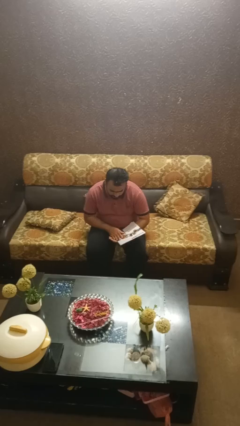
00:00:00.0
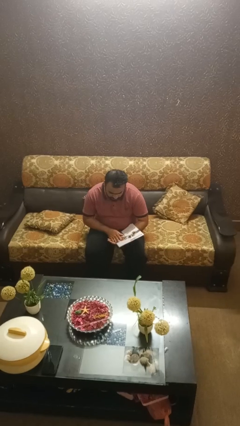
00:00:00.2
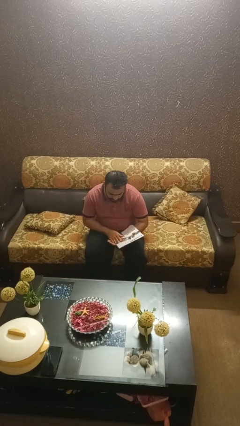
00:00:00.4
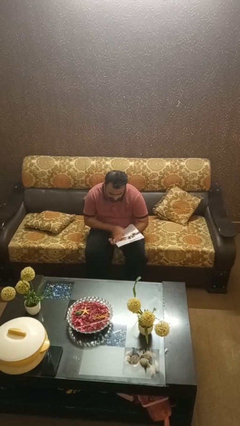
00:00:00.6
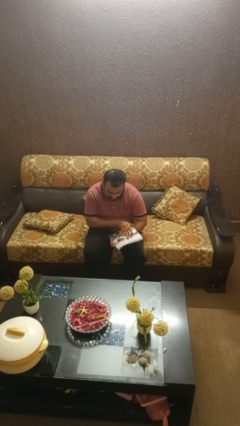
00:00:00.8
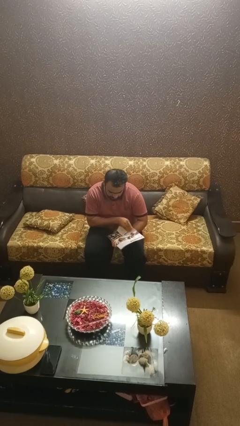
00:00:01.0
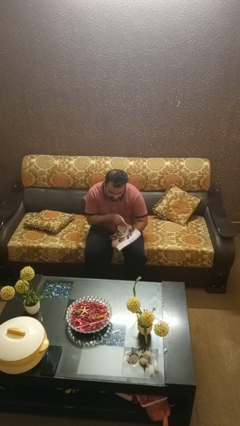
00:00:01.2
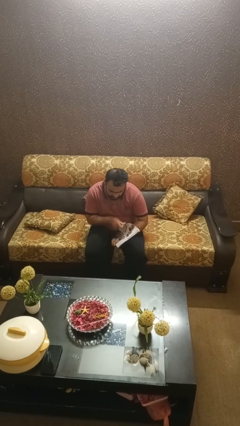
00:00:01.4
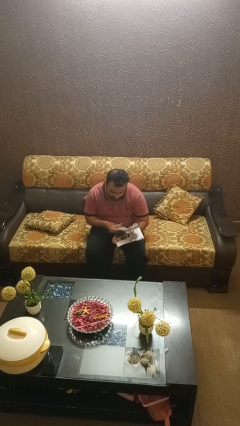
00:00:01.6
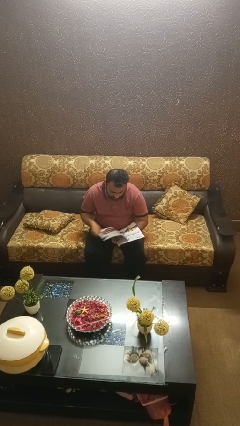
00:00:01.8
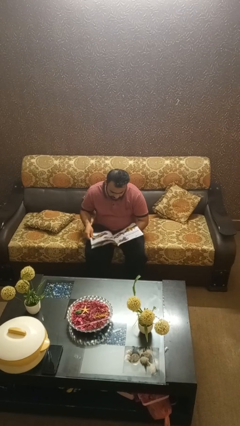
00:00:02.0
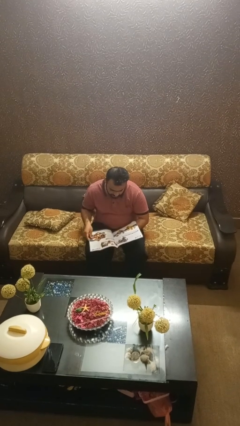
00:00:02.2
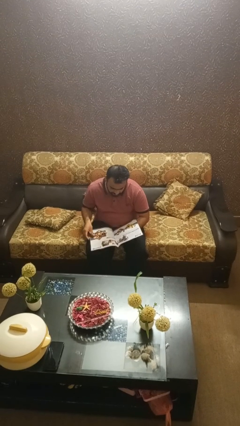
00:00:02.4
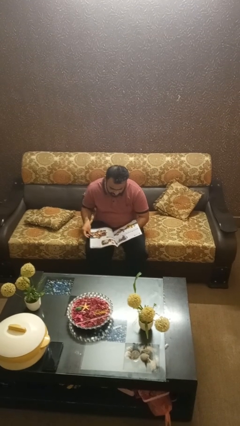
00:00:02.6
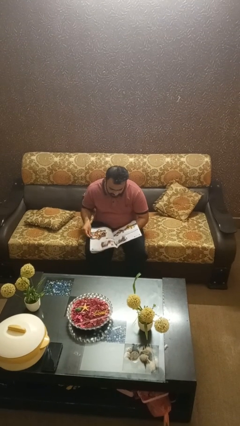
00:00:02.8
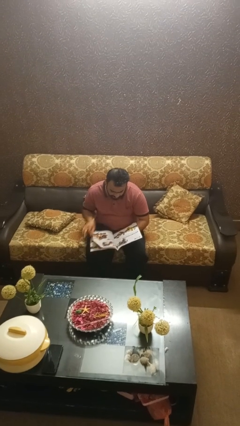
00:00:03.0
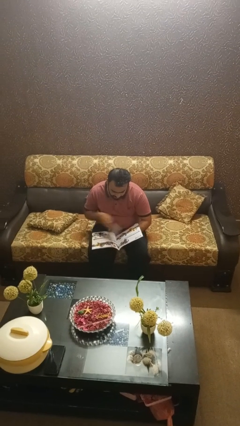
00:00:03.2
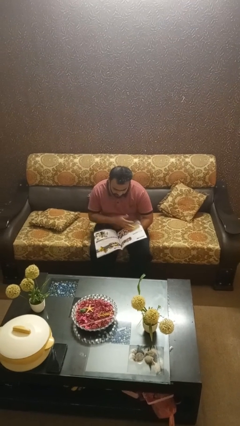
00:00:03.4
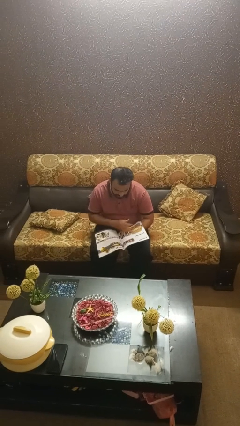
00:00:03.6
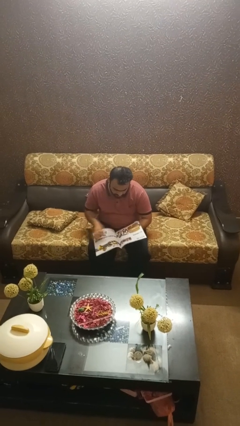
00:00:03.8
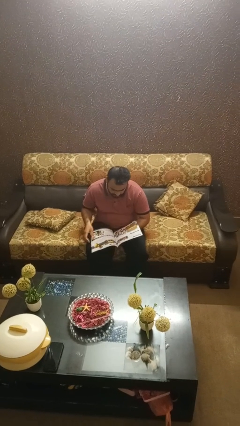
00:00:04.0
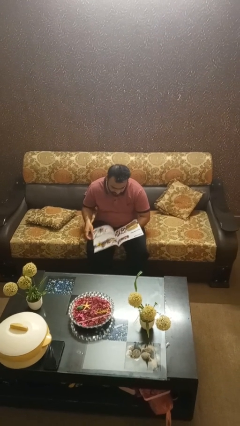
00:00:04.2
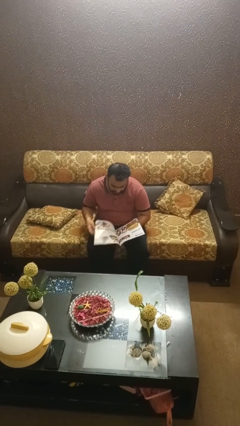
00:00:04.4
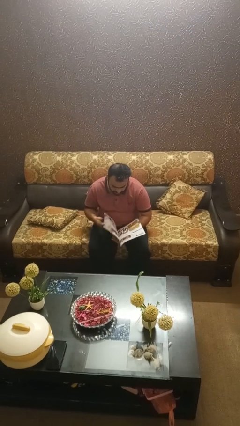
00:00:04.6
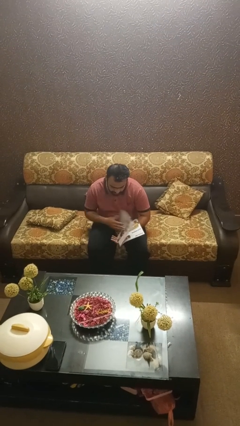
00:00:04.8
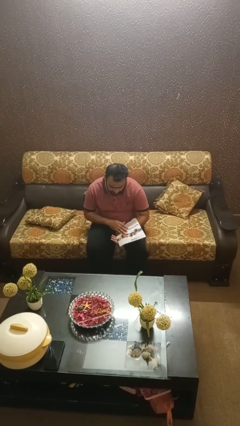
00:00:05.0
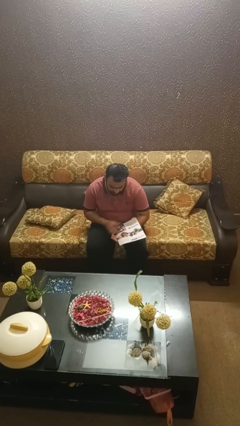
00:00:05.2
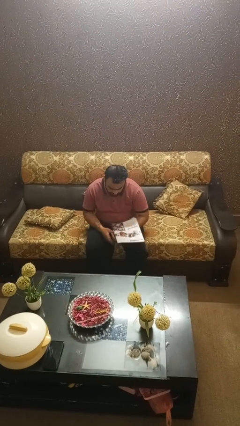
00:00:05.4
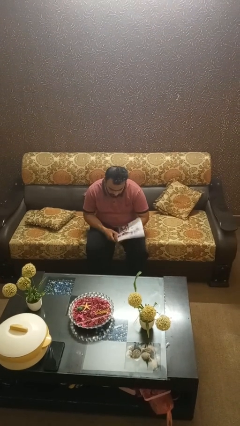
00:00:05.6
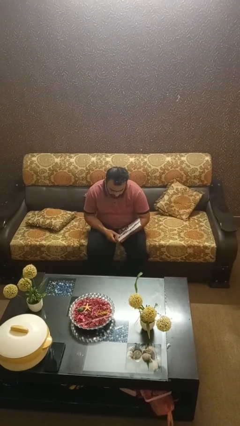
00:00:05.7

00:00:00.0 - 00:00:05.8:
person reads magazine

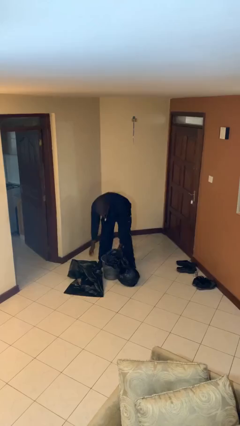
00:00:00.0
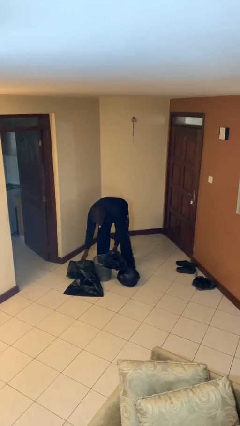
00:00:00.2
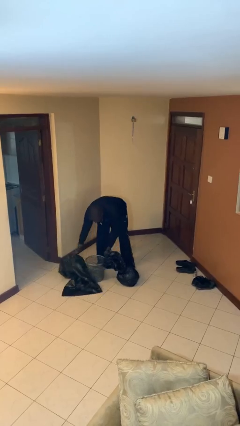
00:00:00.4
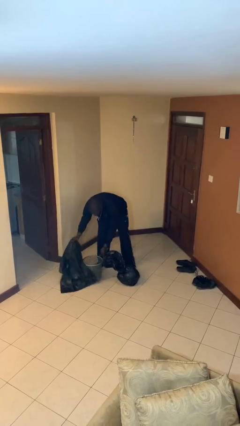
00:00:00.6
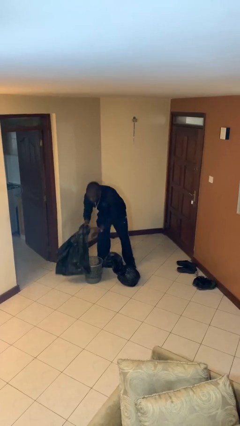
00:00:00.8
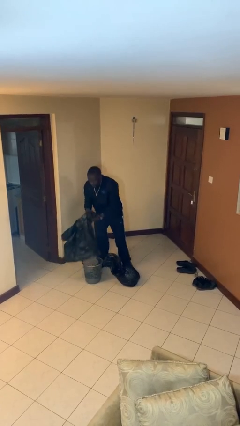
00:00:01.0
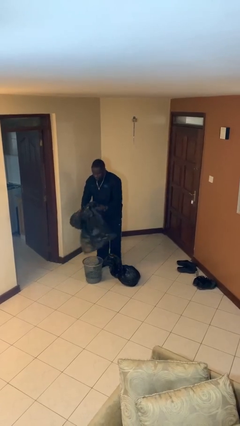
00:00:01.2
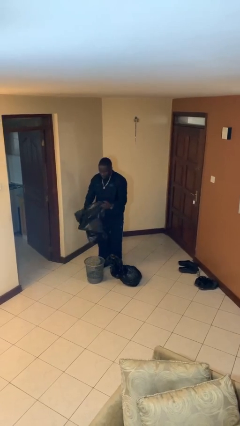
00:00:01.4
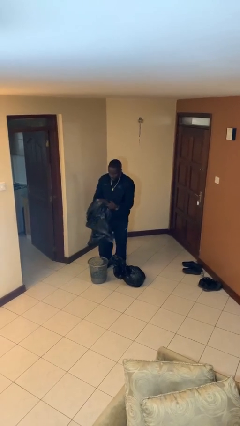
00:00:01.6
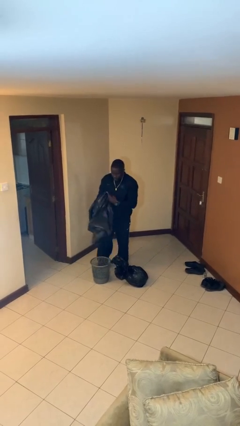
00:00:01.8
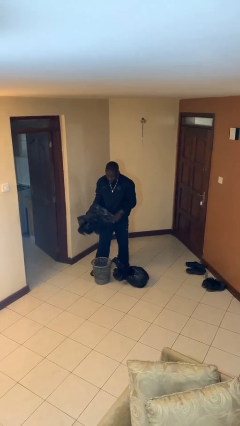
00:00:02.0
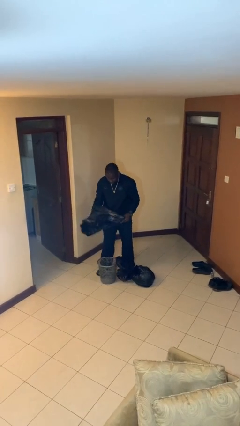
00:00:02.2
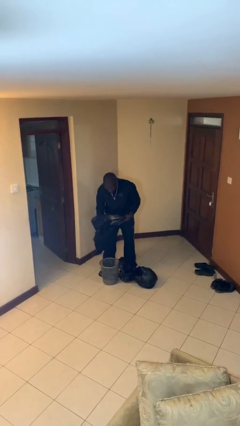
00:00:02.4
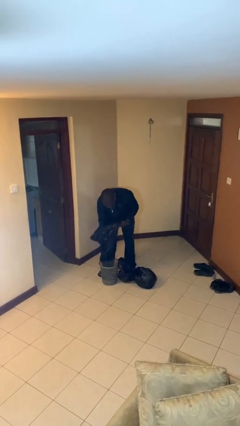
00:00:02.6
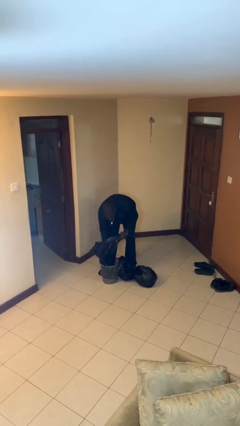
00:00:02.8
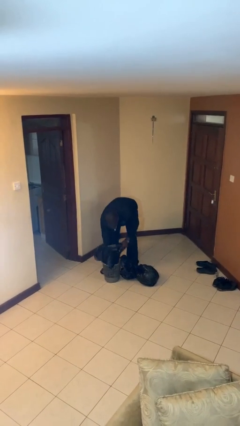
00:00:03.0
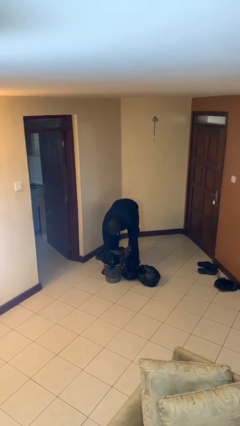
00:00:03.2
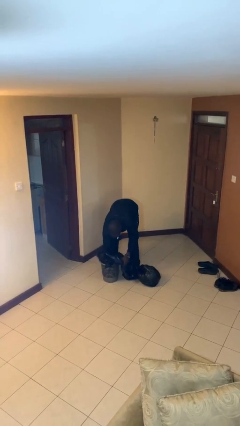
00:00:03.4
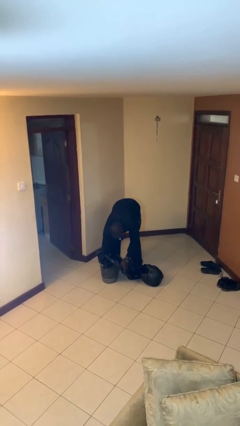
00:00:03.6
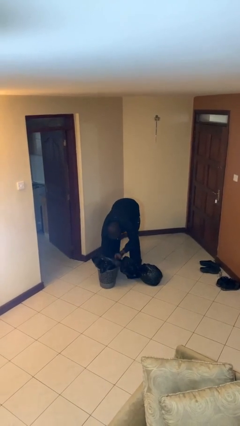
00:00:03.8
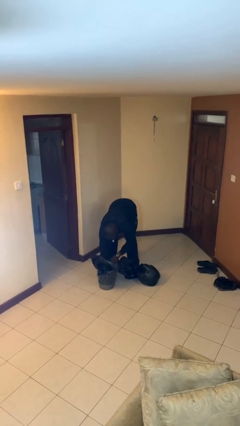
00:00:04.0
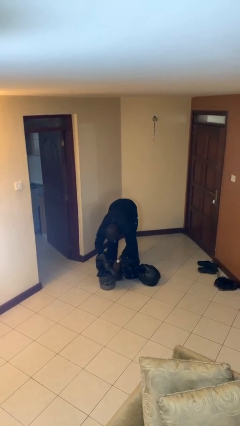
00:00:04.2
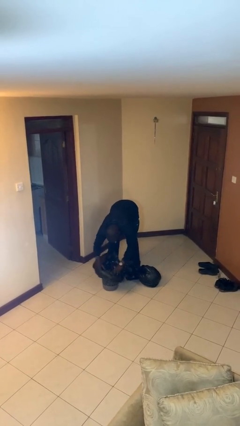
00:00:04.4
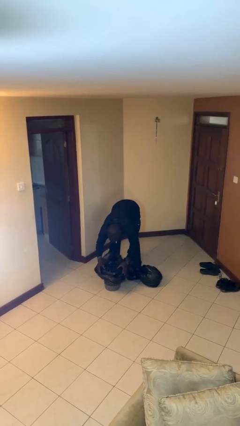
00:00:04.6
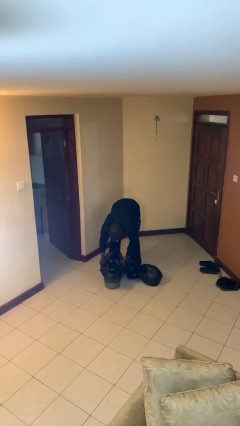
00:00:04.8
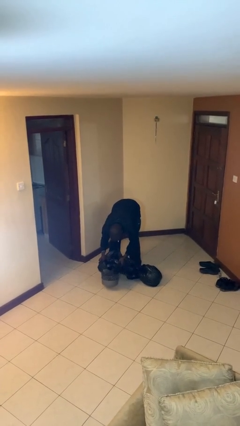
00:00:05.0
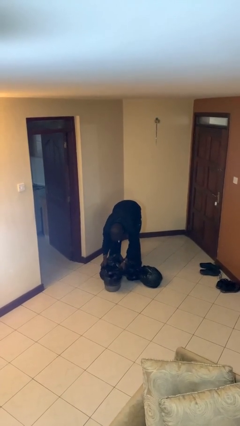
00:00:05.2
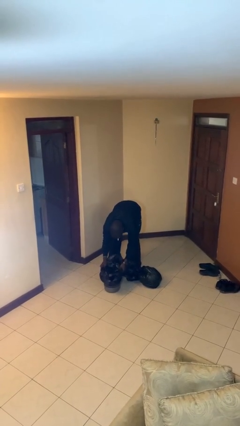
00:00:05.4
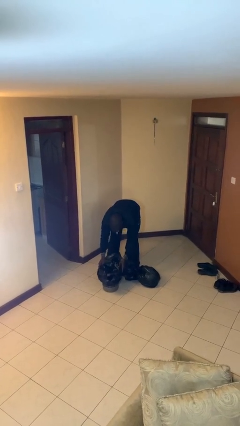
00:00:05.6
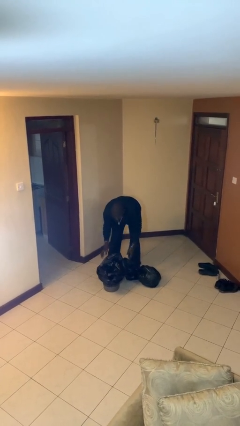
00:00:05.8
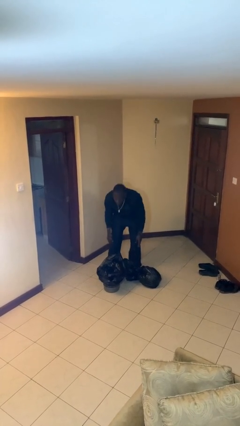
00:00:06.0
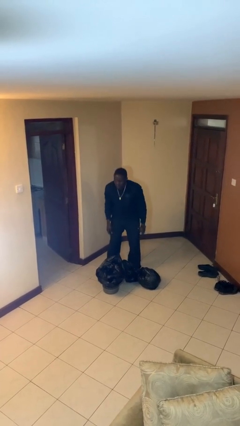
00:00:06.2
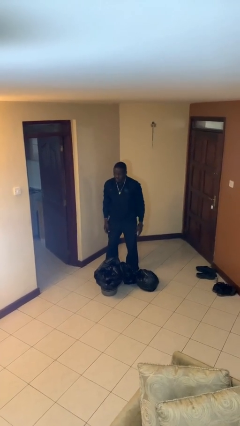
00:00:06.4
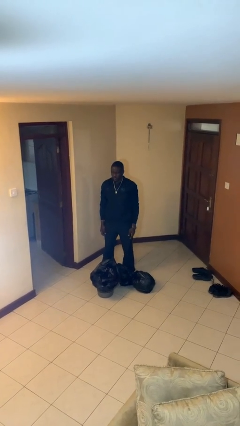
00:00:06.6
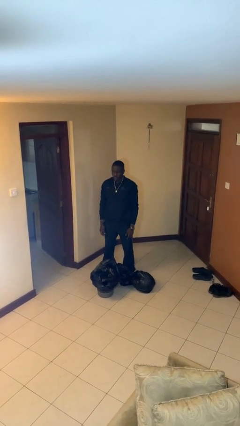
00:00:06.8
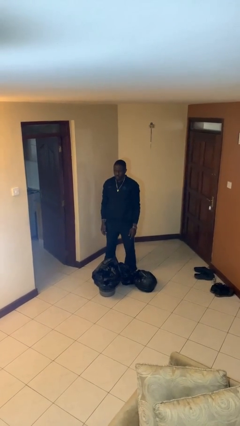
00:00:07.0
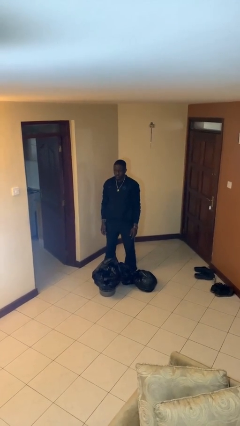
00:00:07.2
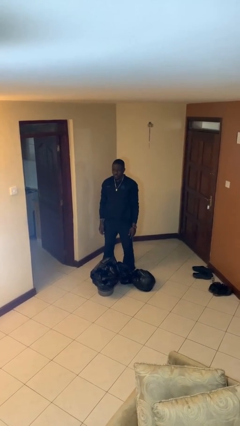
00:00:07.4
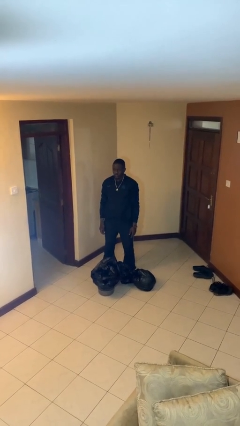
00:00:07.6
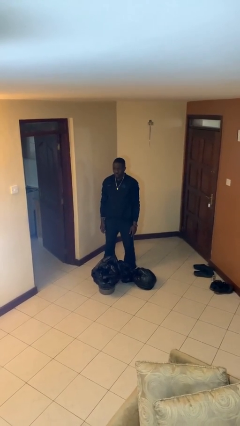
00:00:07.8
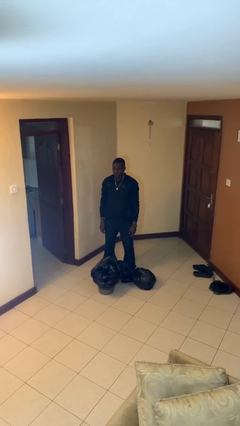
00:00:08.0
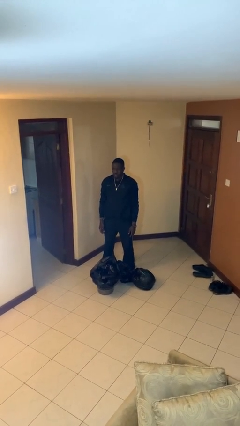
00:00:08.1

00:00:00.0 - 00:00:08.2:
person inserts trashbag into trashcan

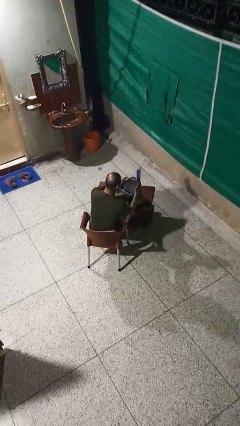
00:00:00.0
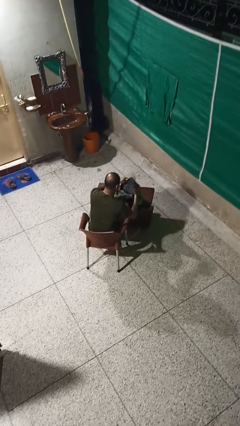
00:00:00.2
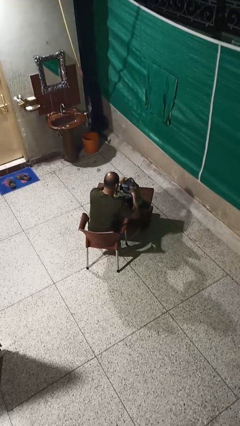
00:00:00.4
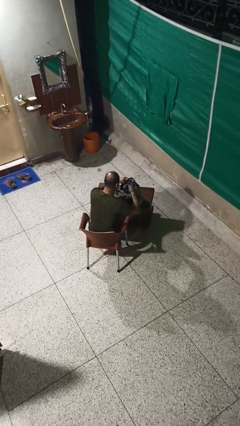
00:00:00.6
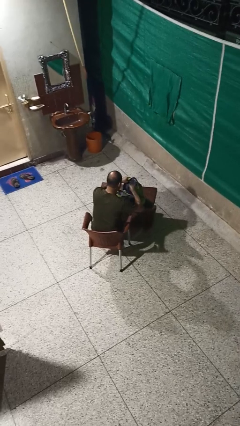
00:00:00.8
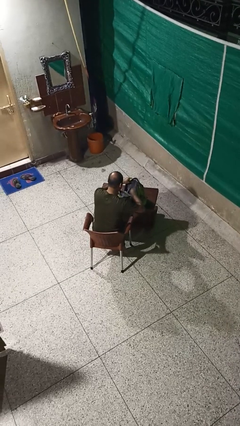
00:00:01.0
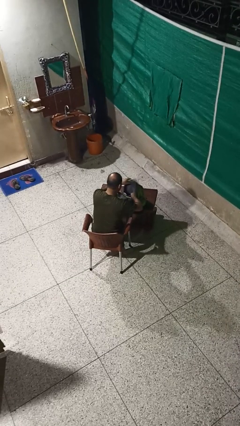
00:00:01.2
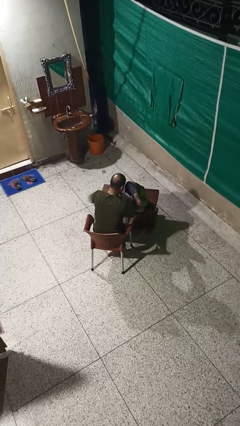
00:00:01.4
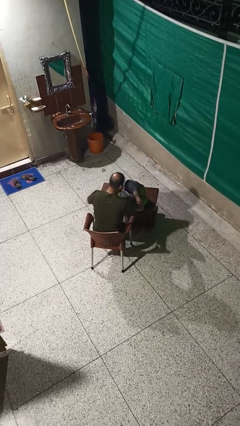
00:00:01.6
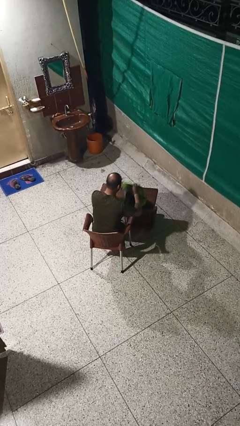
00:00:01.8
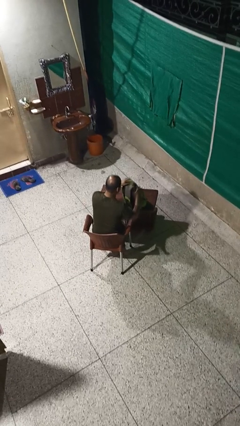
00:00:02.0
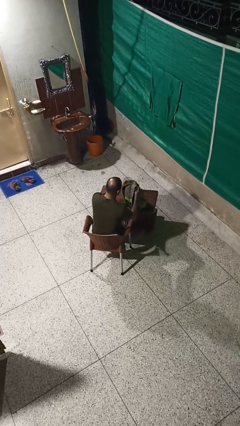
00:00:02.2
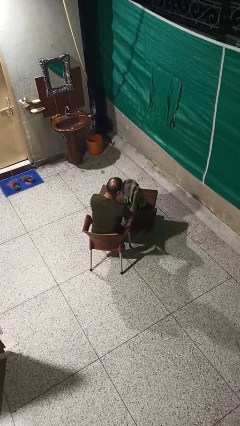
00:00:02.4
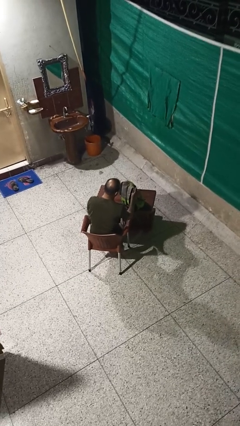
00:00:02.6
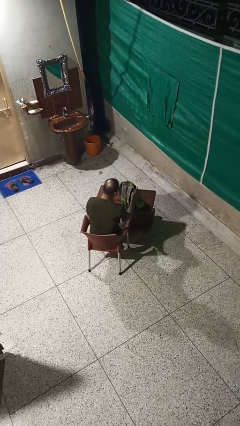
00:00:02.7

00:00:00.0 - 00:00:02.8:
person puts object into backpack

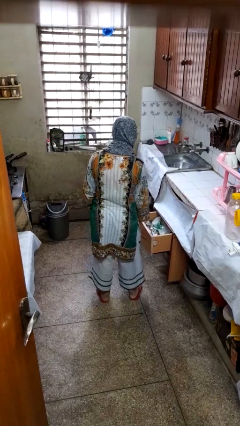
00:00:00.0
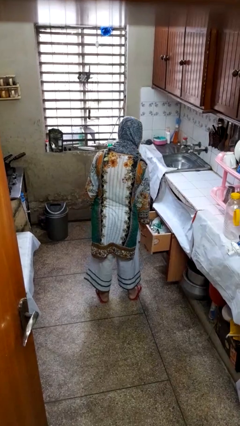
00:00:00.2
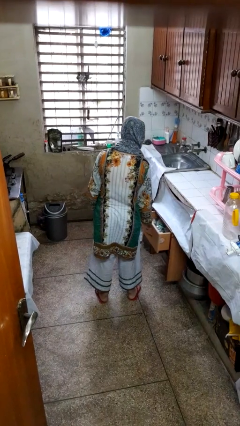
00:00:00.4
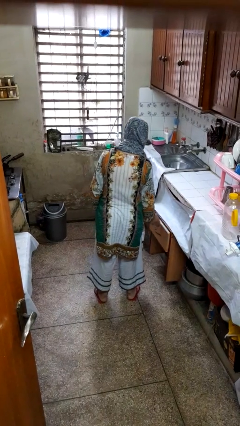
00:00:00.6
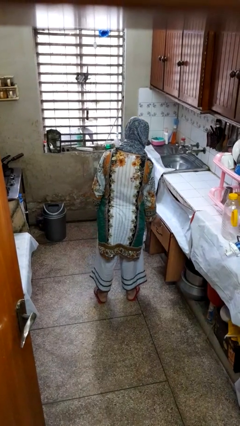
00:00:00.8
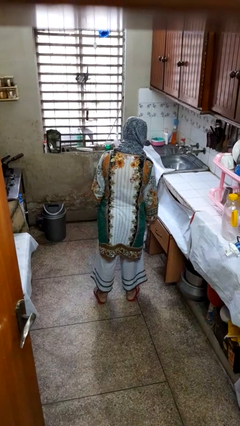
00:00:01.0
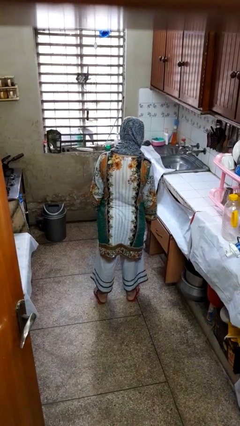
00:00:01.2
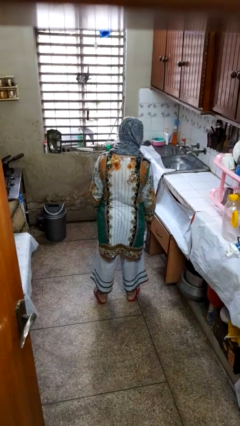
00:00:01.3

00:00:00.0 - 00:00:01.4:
person closes kitchen drawer
